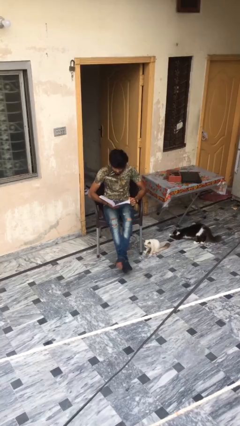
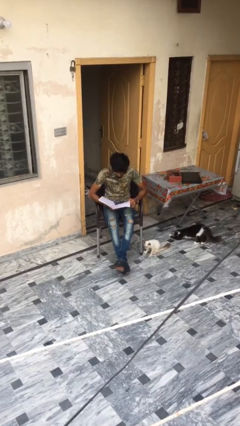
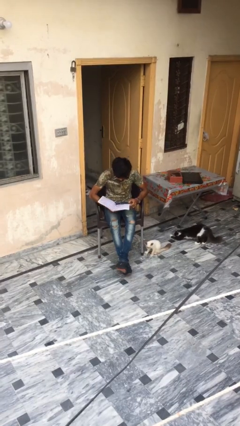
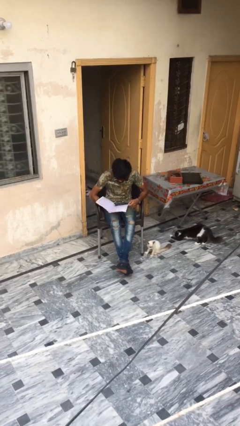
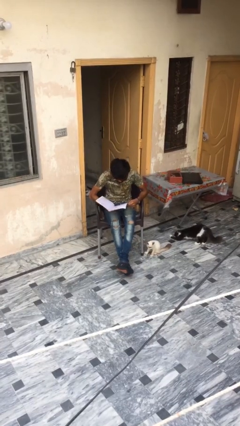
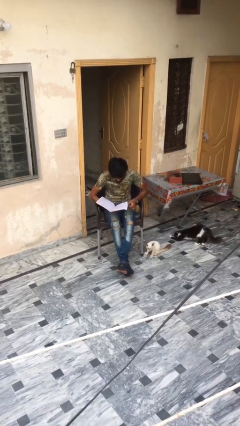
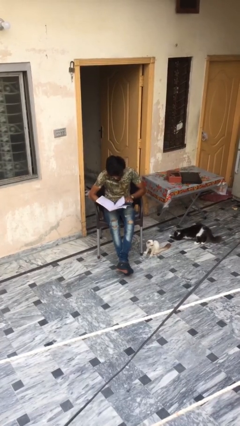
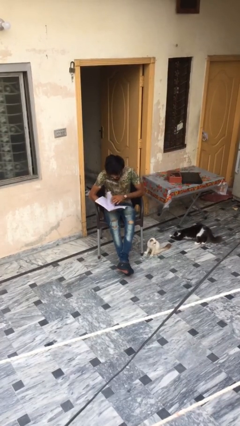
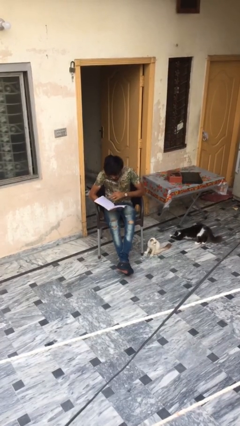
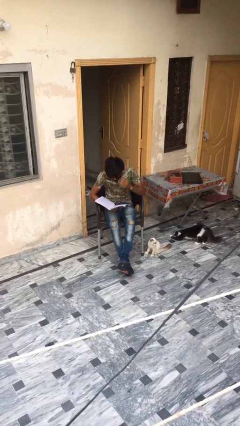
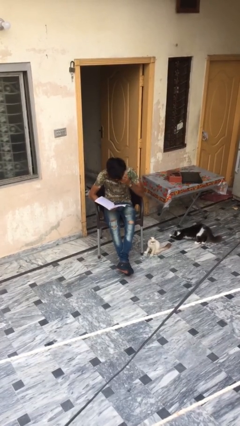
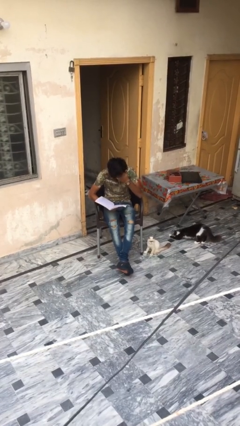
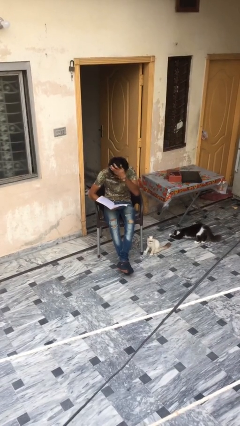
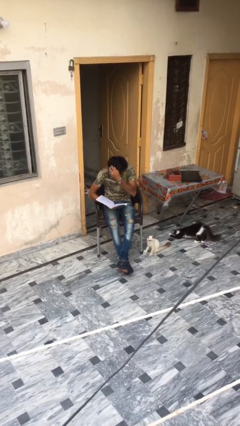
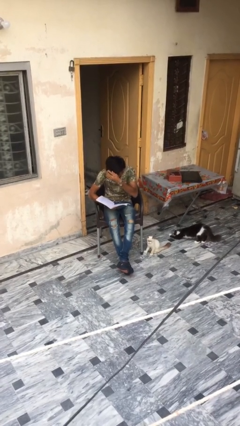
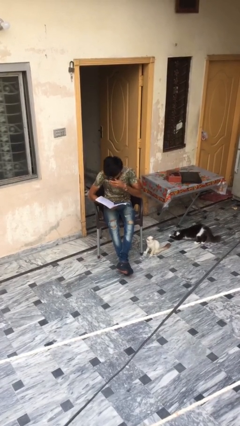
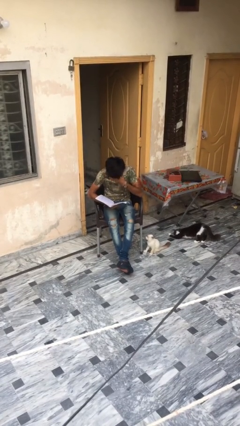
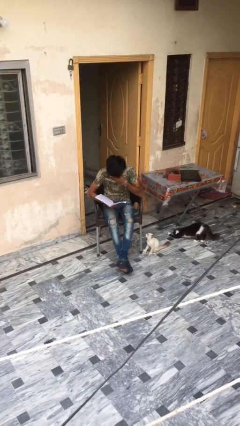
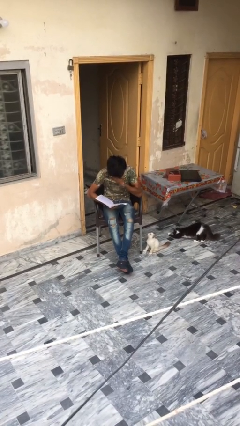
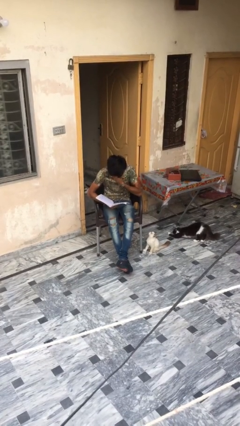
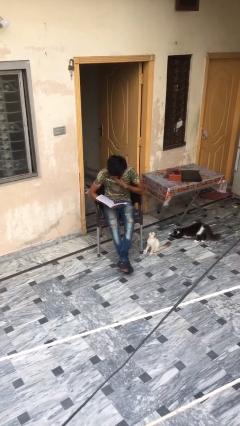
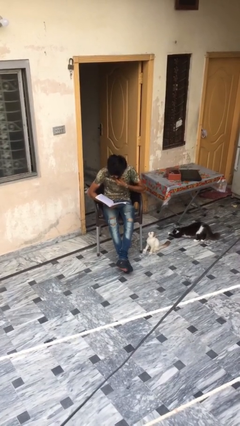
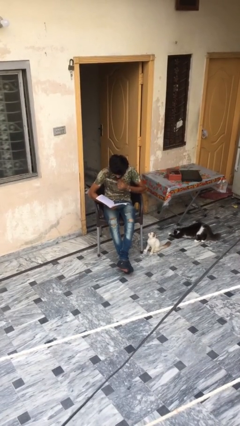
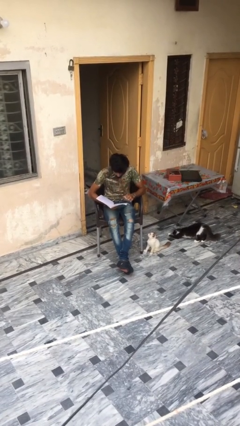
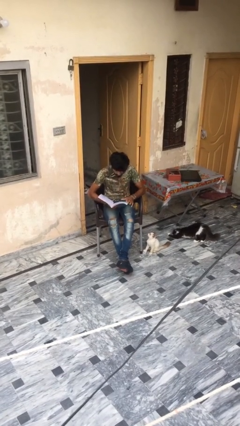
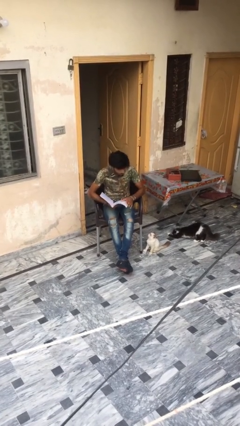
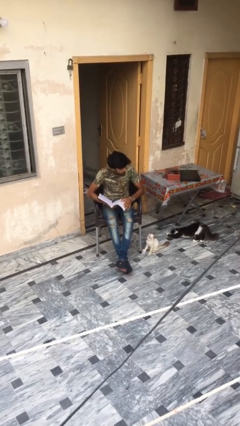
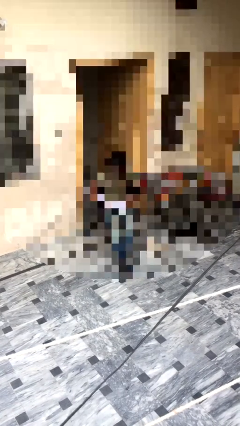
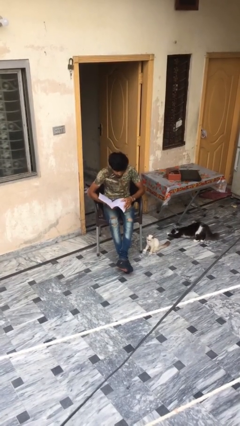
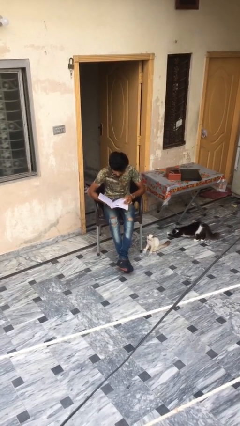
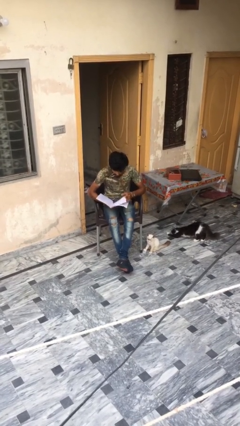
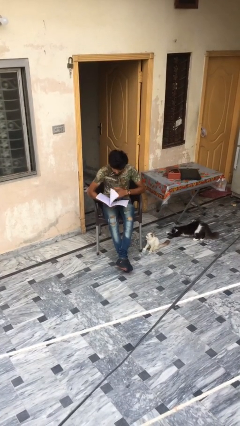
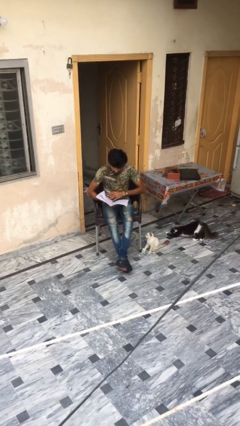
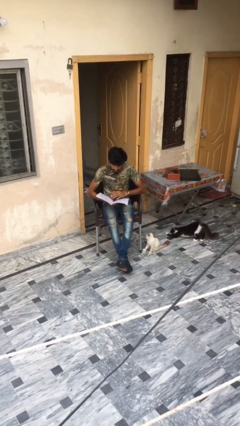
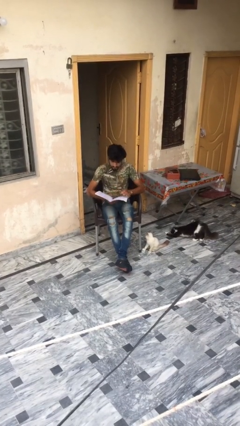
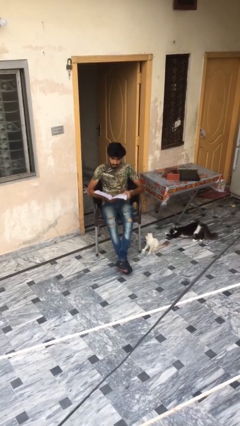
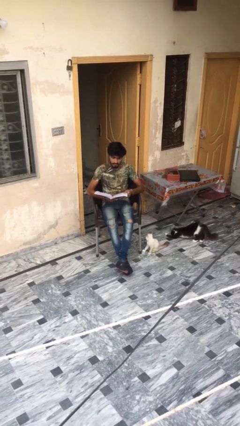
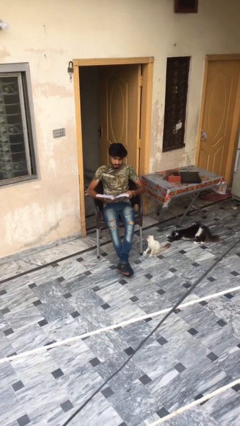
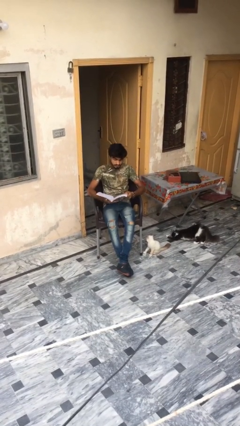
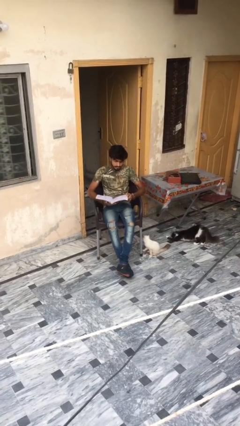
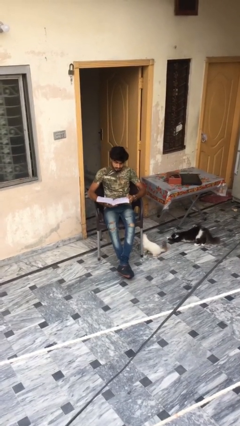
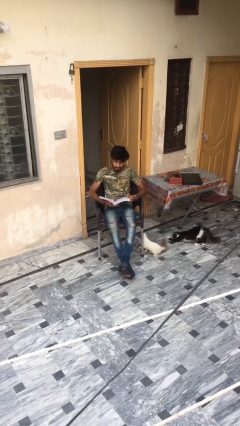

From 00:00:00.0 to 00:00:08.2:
person reads document

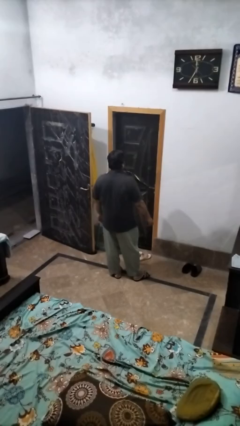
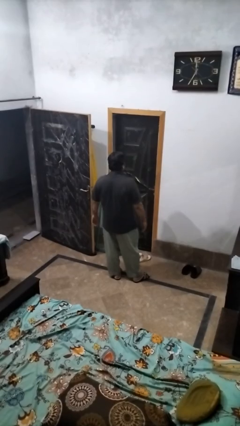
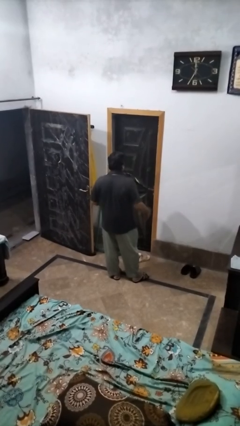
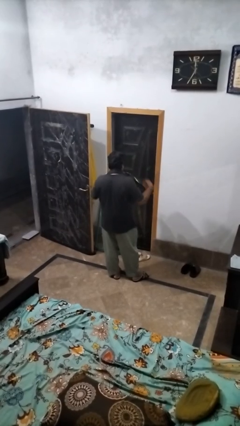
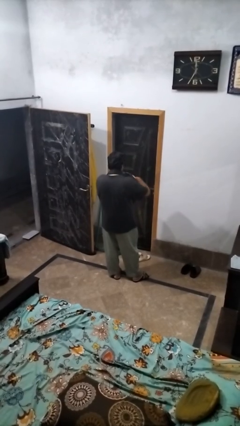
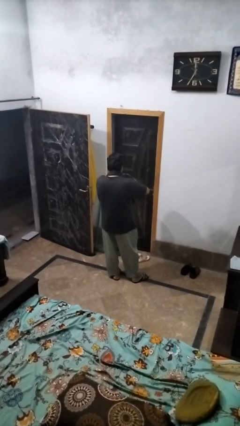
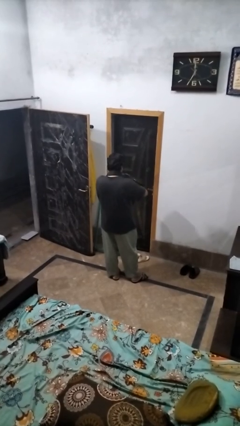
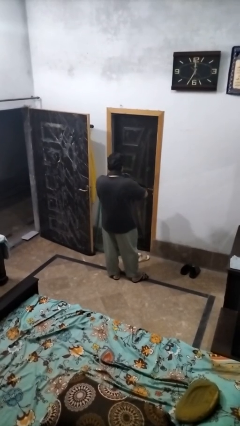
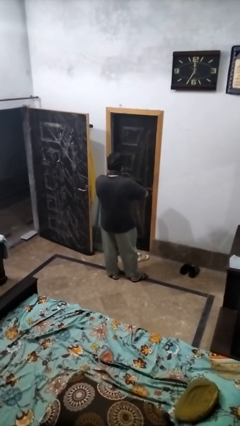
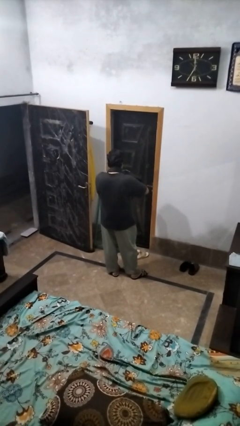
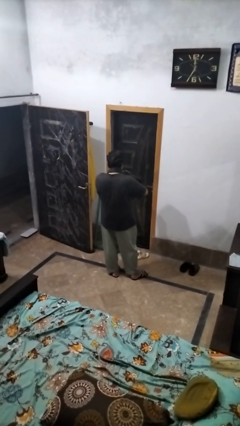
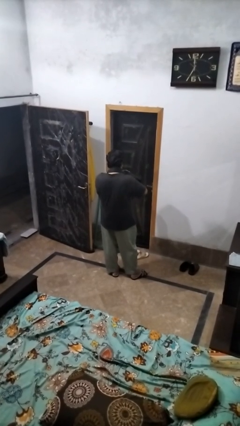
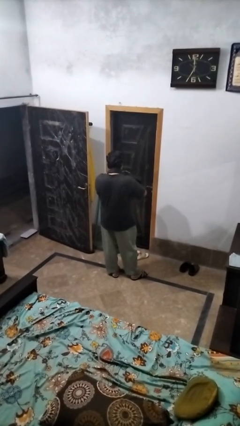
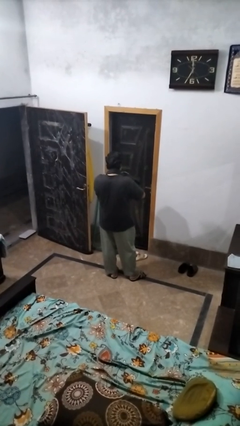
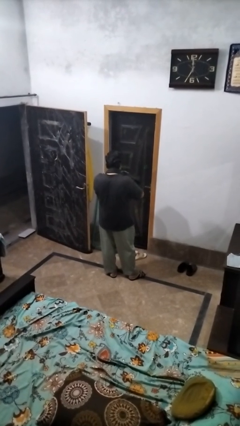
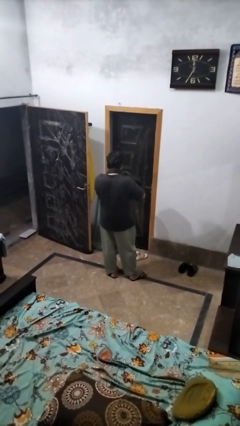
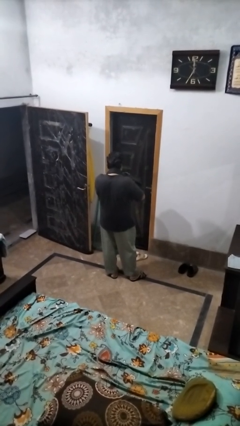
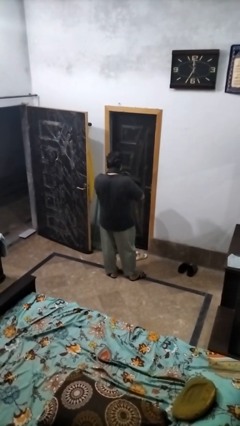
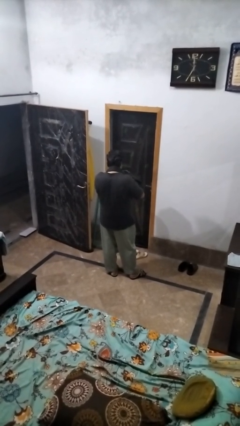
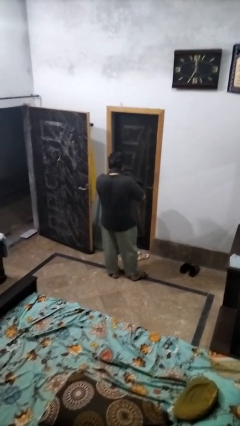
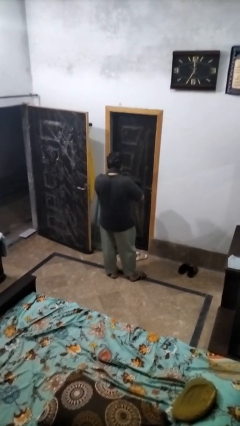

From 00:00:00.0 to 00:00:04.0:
person searches in bag

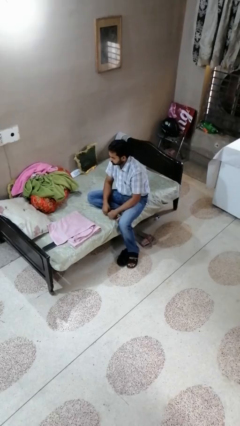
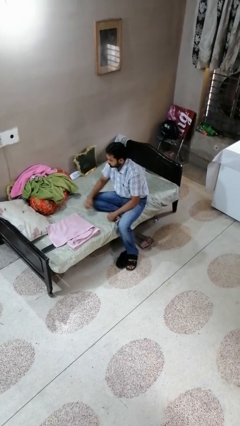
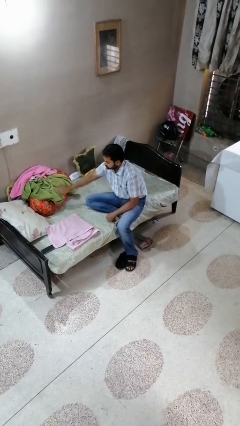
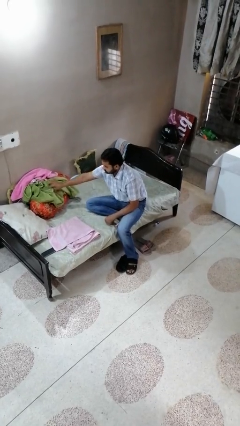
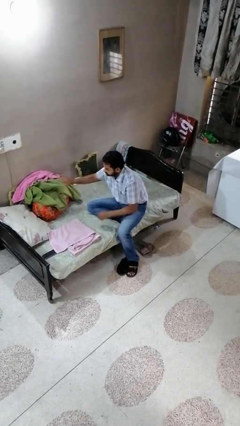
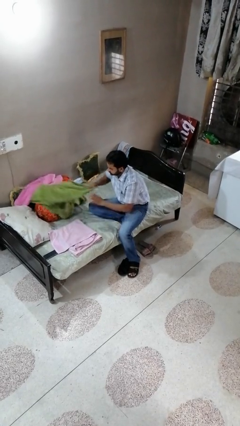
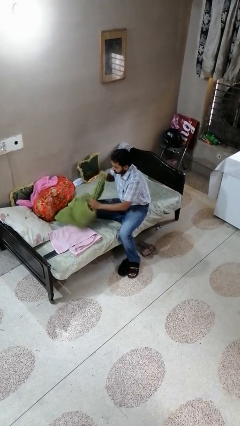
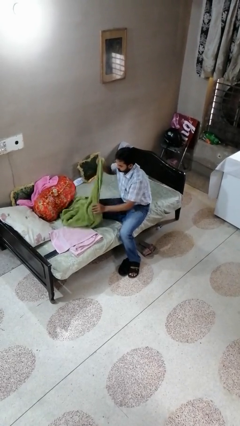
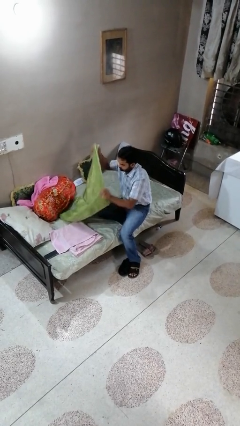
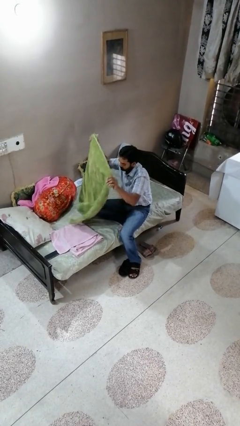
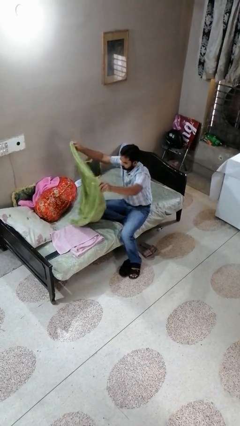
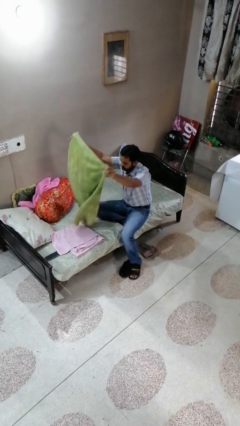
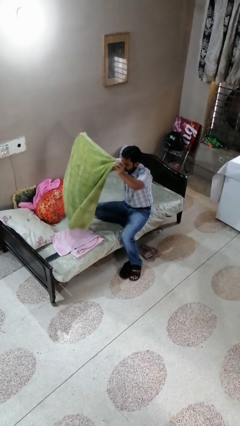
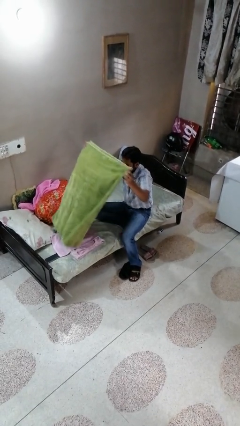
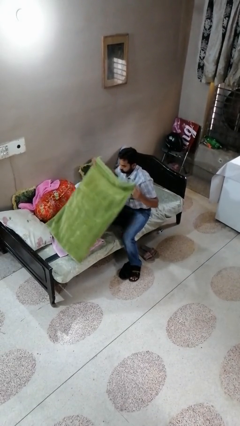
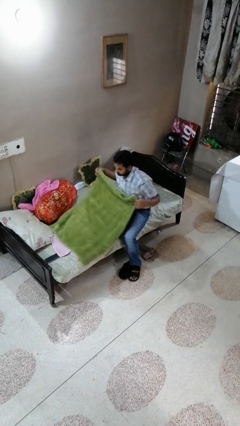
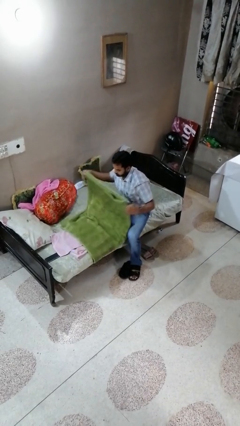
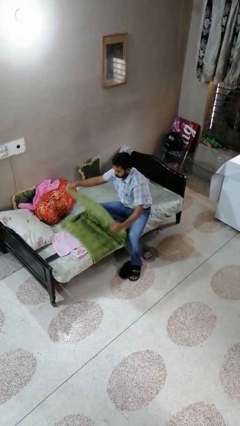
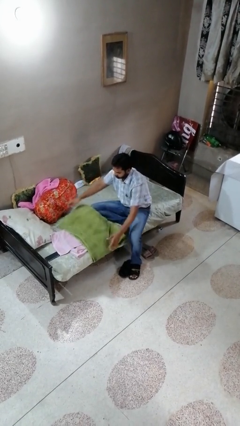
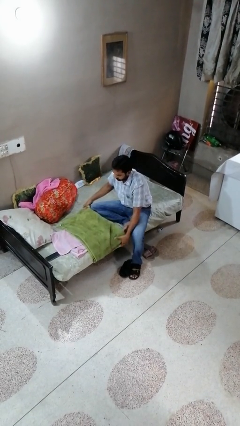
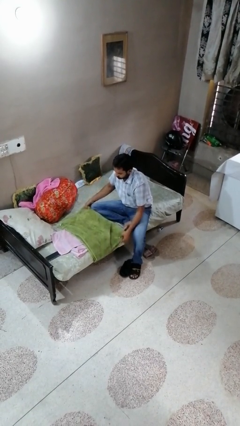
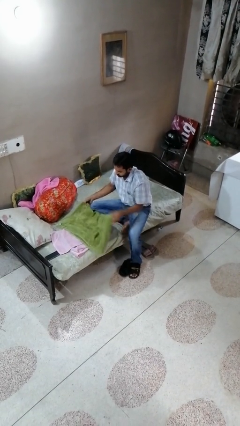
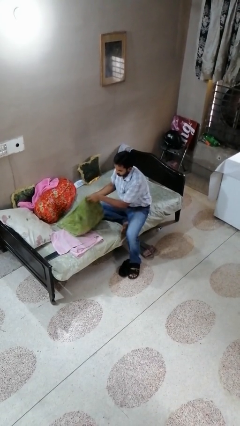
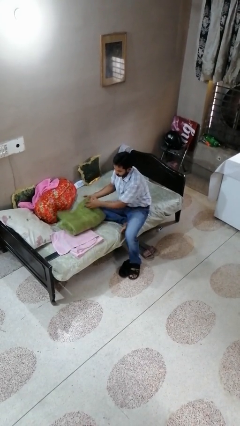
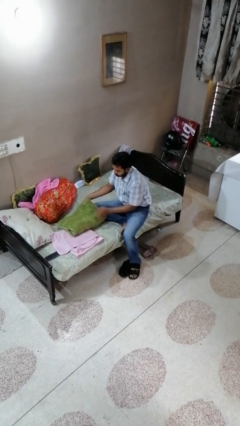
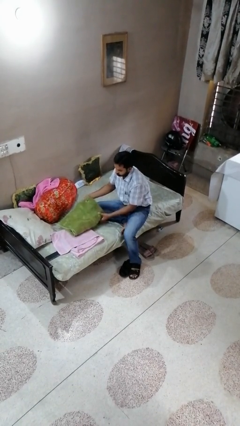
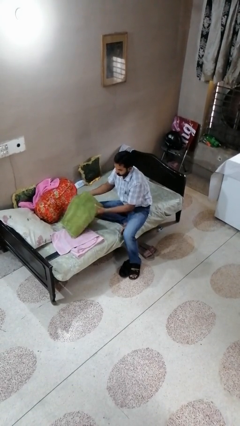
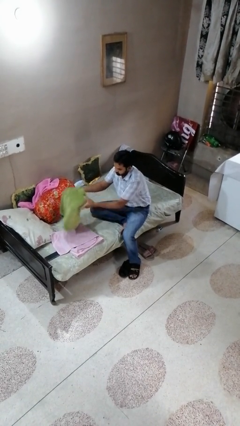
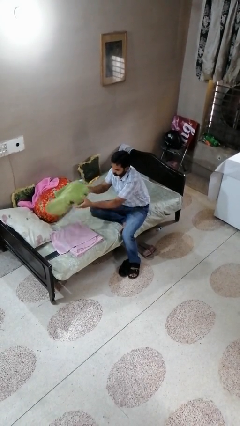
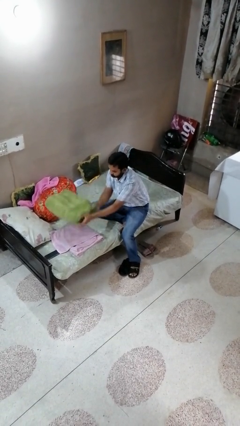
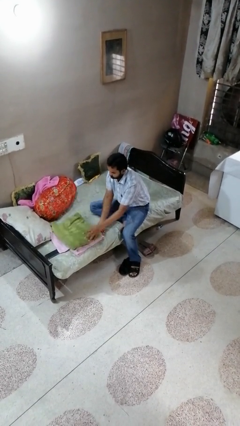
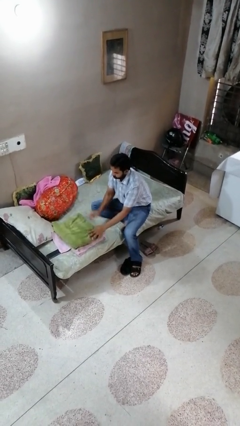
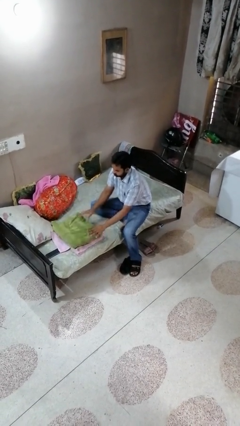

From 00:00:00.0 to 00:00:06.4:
person folds towel
